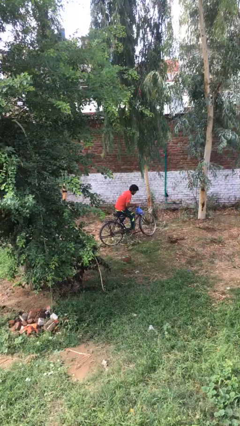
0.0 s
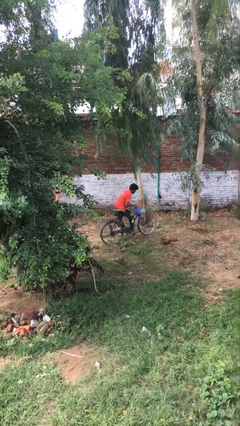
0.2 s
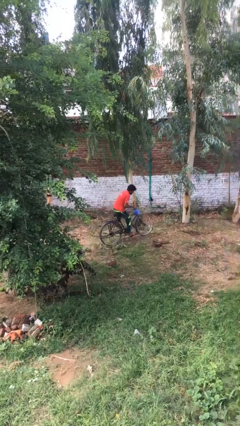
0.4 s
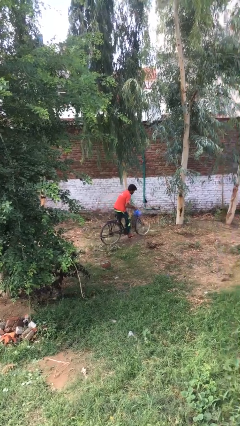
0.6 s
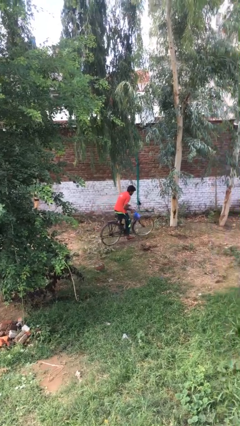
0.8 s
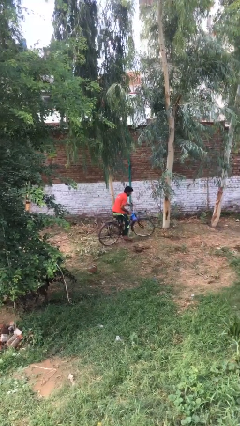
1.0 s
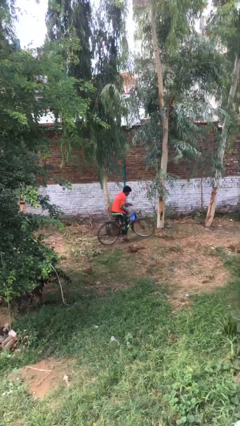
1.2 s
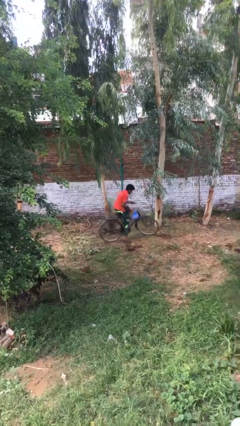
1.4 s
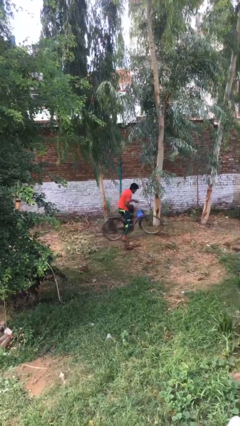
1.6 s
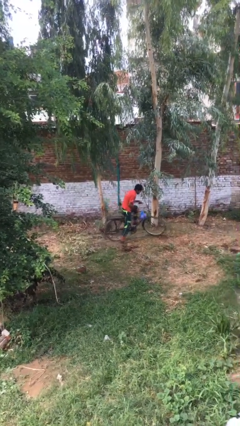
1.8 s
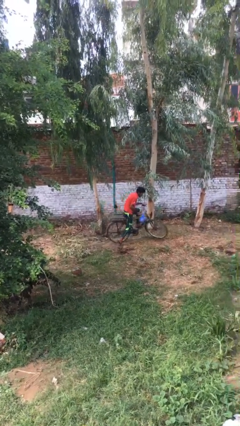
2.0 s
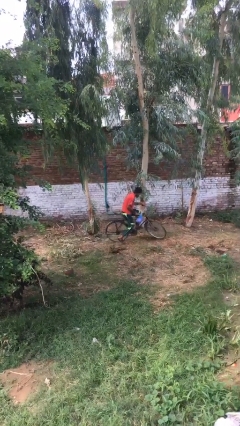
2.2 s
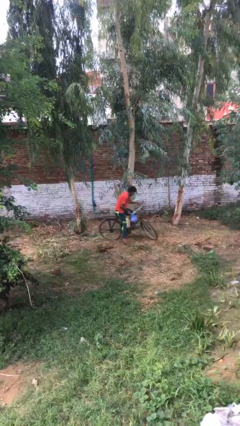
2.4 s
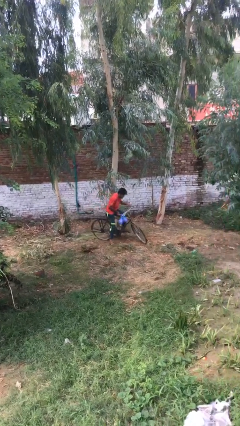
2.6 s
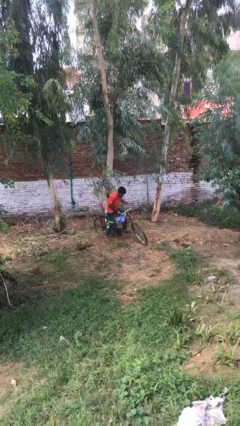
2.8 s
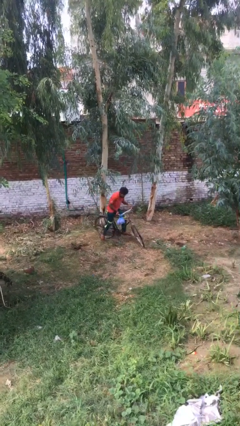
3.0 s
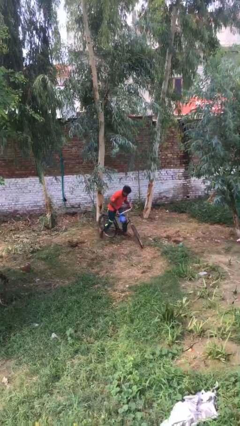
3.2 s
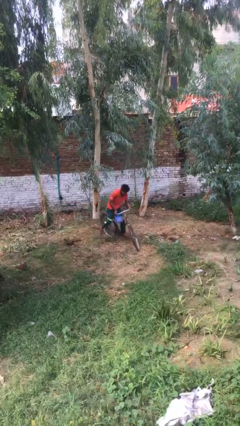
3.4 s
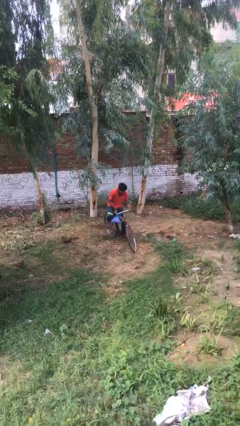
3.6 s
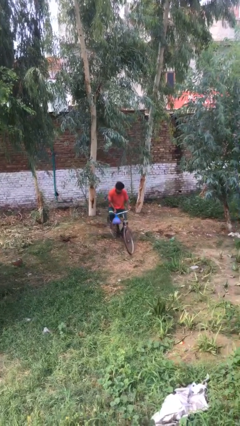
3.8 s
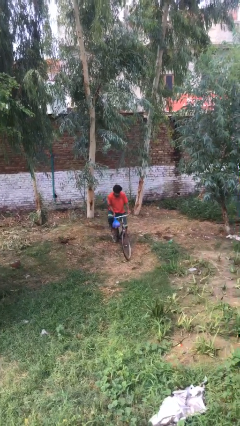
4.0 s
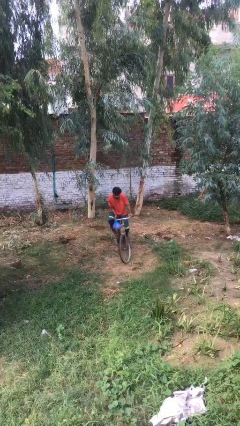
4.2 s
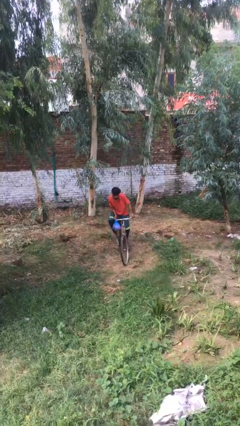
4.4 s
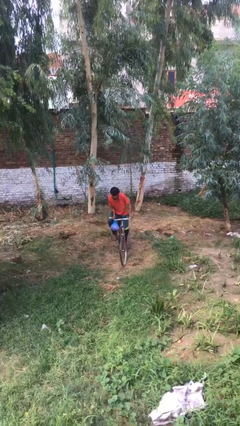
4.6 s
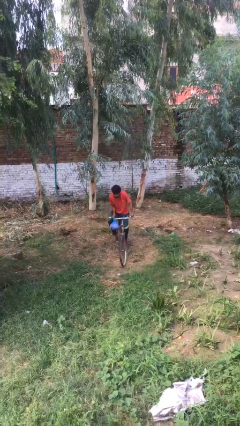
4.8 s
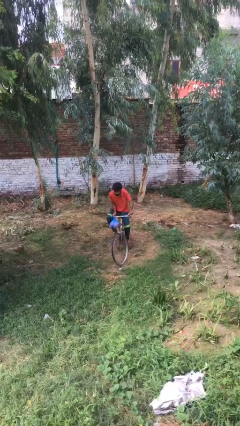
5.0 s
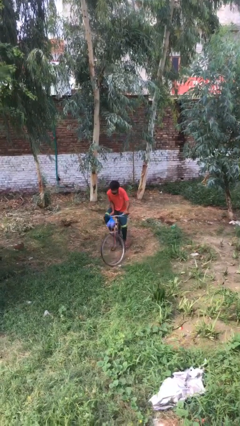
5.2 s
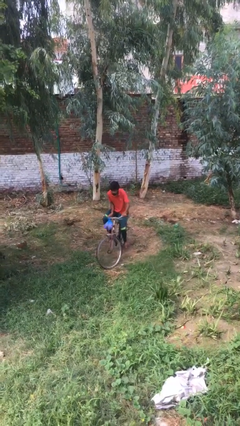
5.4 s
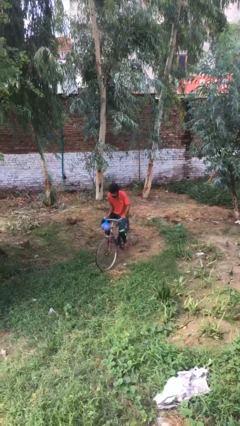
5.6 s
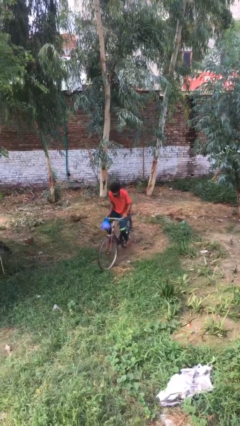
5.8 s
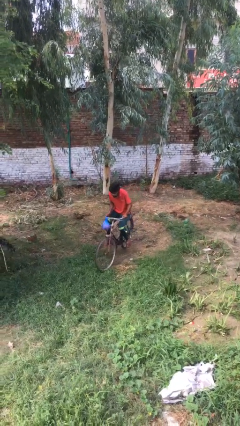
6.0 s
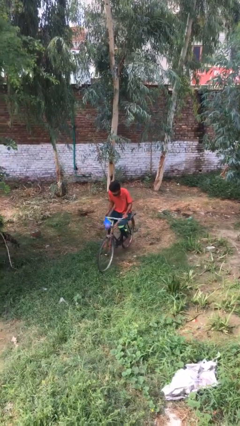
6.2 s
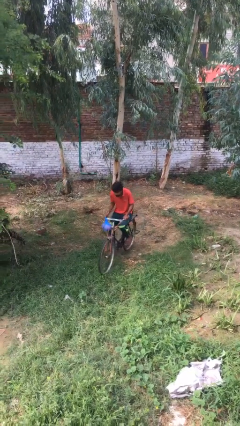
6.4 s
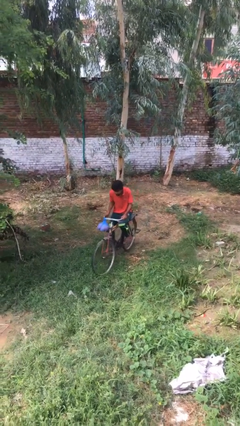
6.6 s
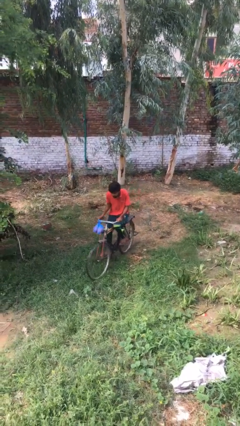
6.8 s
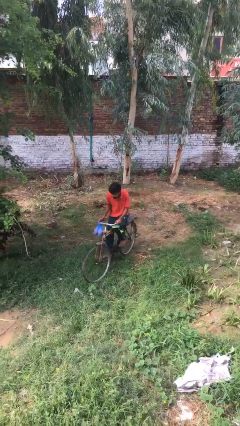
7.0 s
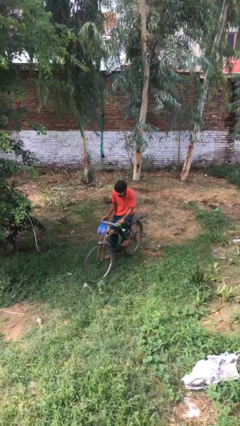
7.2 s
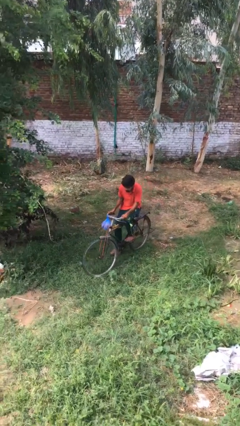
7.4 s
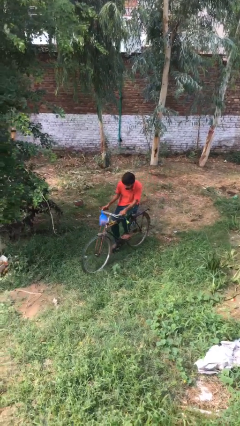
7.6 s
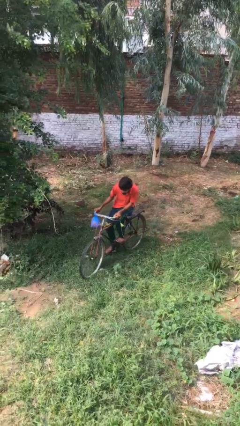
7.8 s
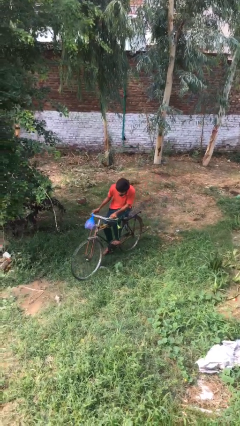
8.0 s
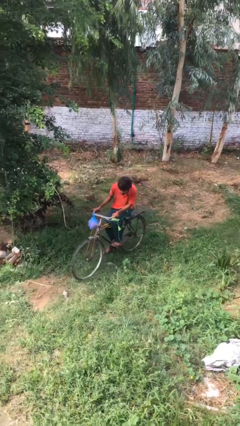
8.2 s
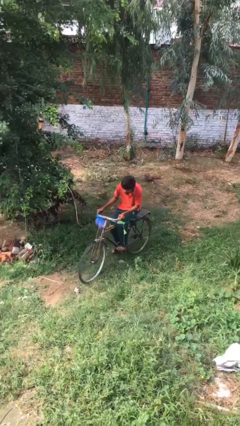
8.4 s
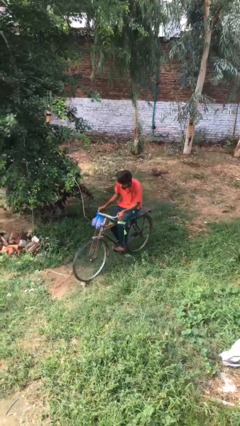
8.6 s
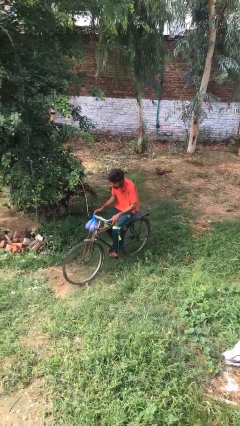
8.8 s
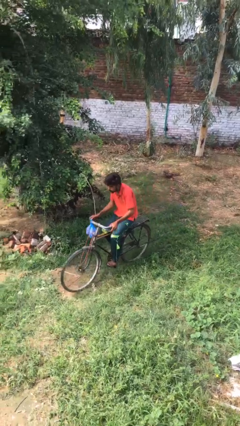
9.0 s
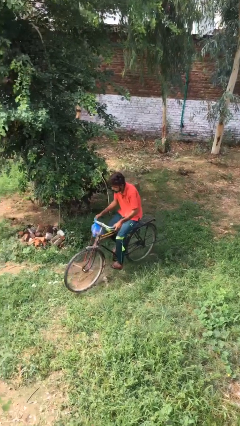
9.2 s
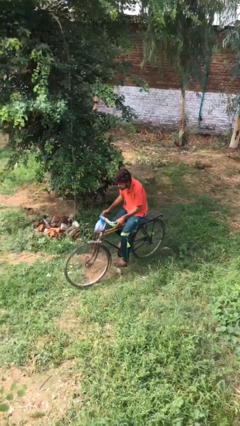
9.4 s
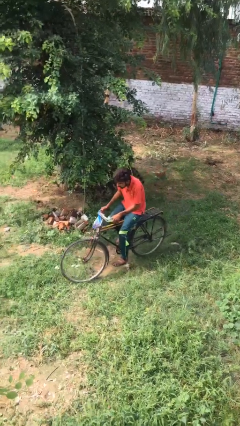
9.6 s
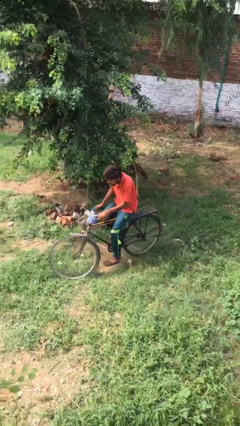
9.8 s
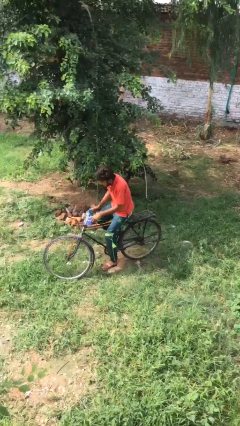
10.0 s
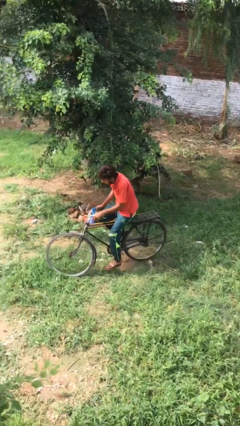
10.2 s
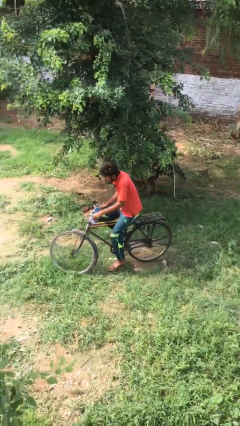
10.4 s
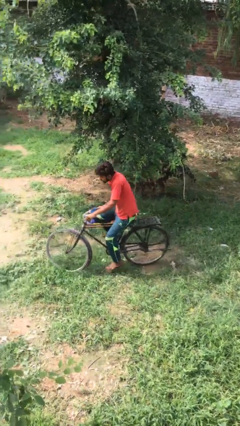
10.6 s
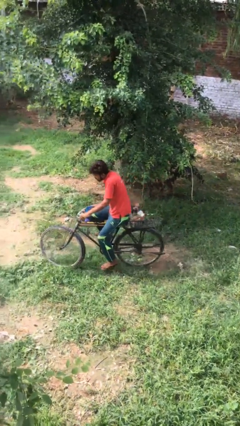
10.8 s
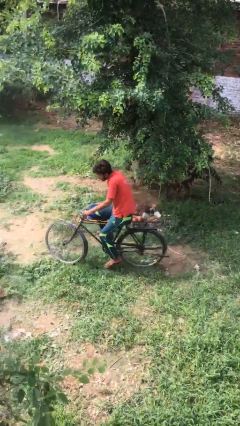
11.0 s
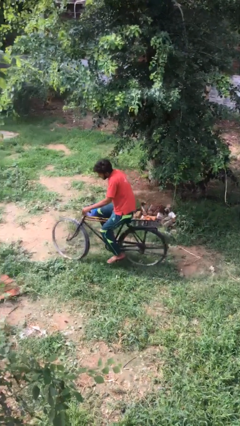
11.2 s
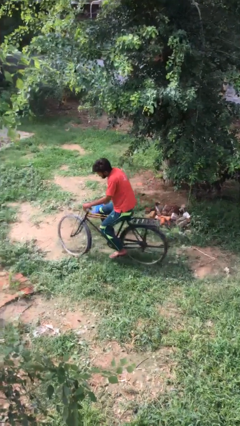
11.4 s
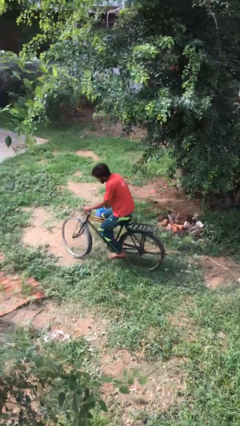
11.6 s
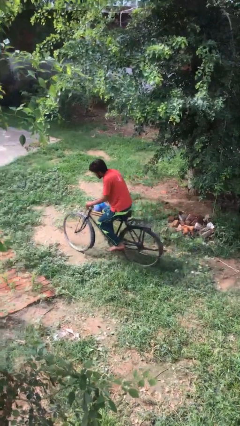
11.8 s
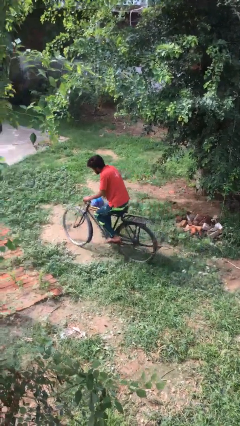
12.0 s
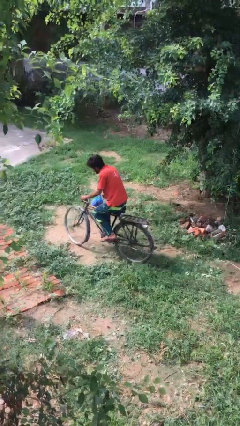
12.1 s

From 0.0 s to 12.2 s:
person rides bicycle

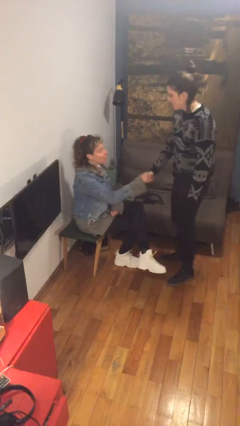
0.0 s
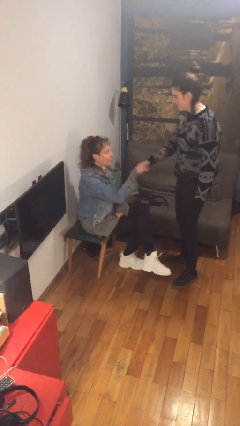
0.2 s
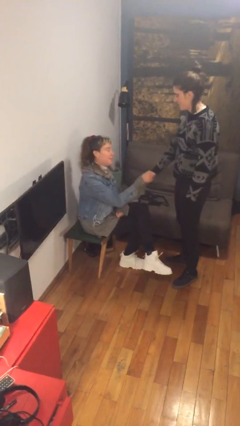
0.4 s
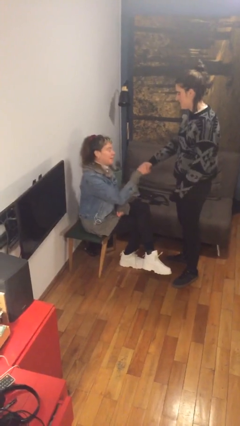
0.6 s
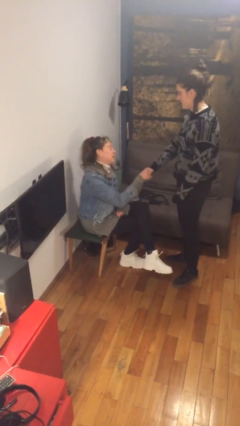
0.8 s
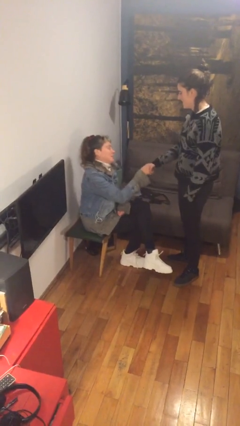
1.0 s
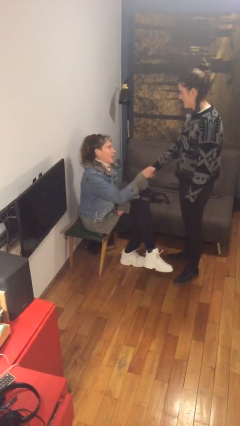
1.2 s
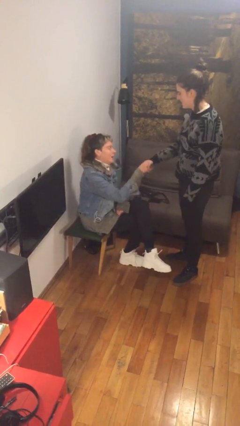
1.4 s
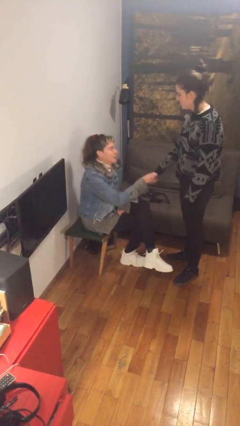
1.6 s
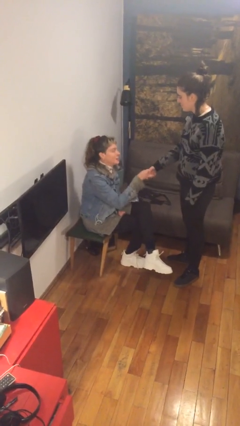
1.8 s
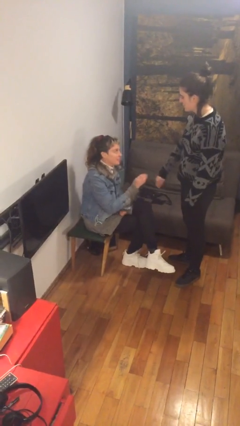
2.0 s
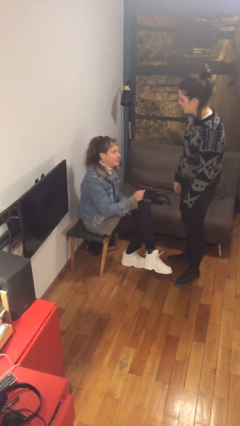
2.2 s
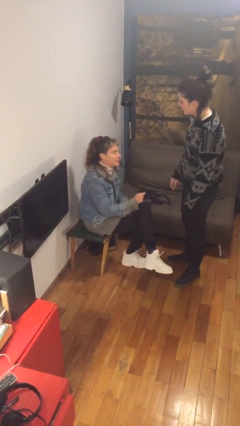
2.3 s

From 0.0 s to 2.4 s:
person shakes hand

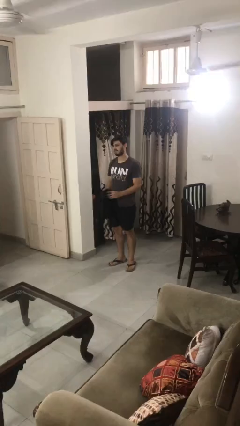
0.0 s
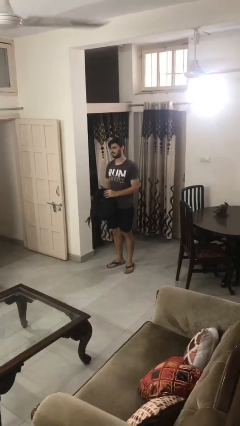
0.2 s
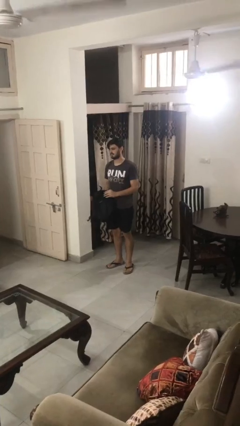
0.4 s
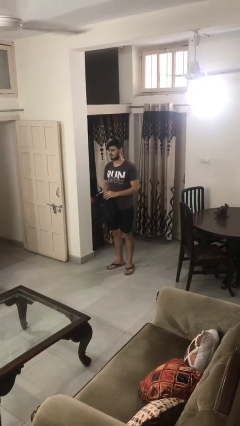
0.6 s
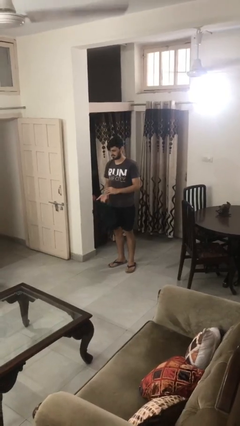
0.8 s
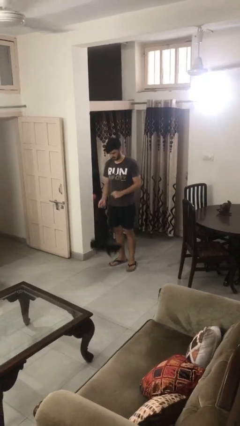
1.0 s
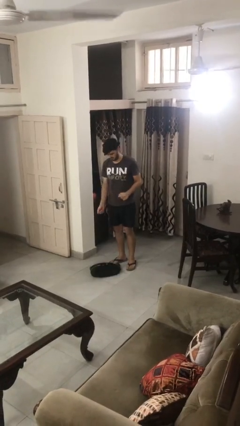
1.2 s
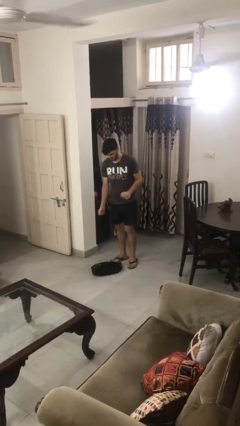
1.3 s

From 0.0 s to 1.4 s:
person drops object

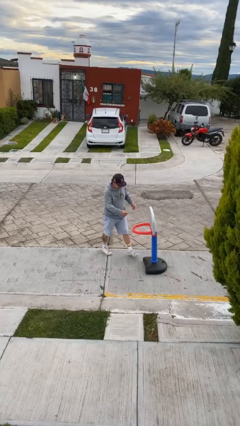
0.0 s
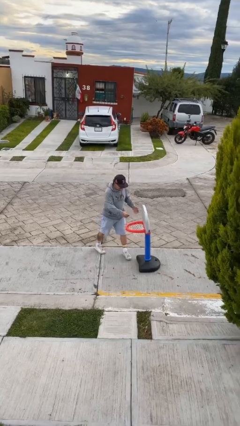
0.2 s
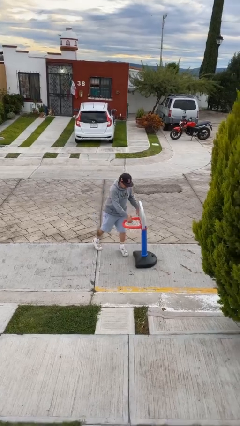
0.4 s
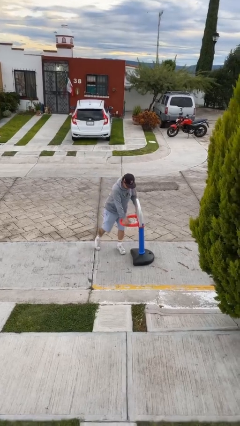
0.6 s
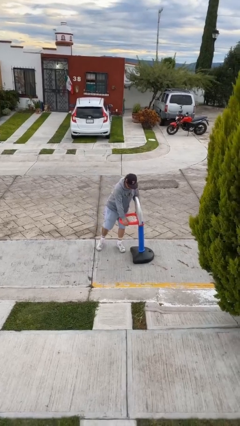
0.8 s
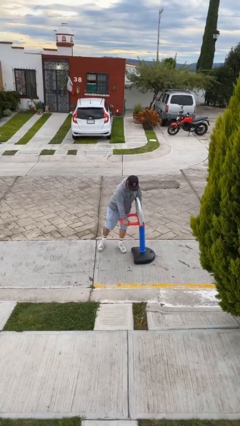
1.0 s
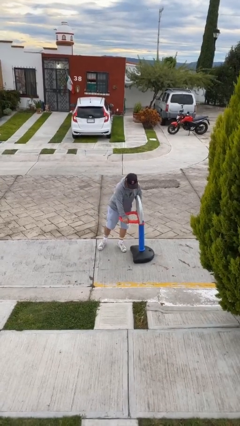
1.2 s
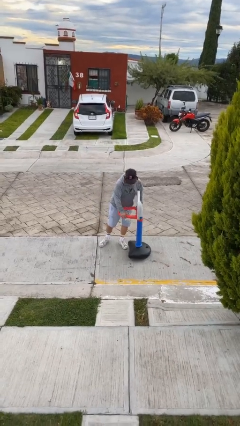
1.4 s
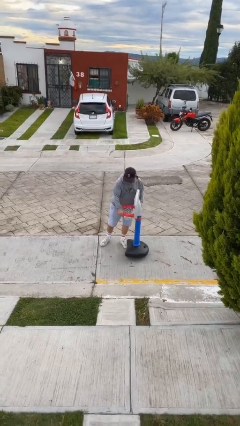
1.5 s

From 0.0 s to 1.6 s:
person picks up object from floor
